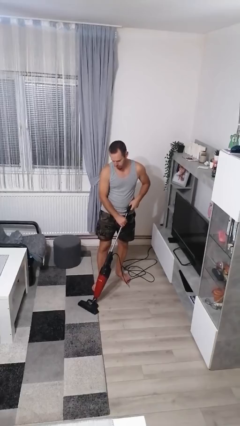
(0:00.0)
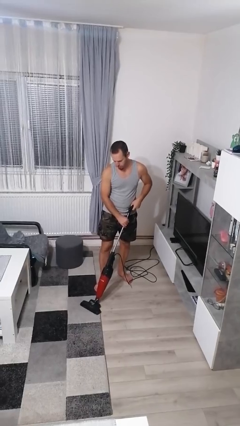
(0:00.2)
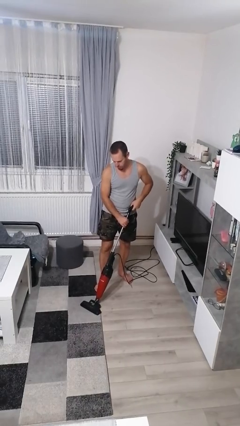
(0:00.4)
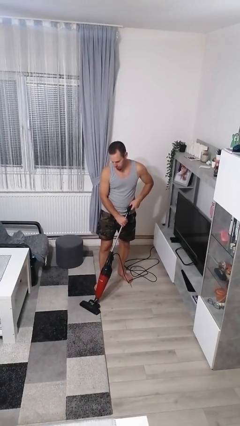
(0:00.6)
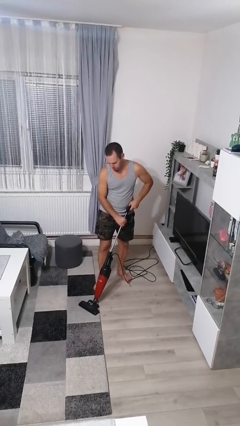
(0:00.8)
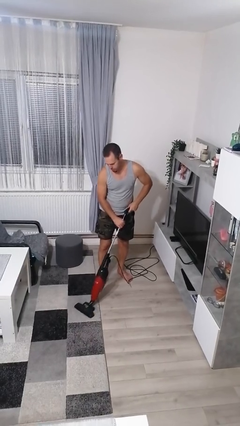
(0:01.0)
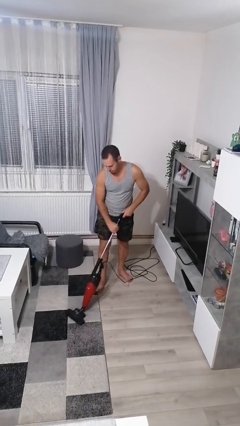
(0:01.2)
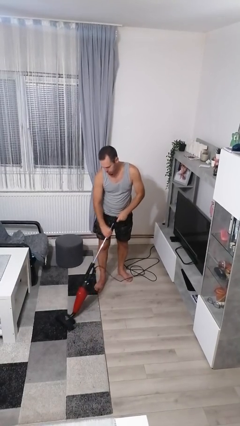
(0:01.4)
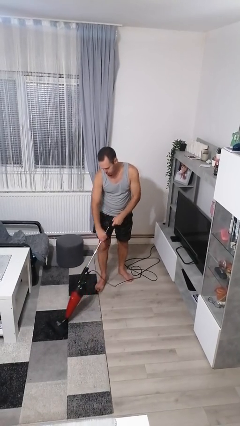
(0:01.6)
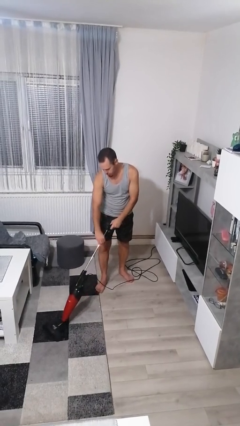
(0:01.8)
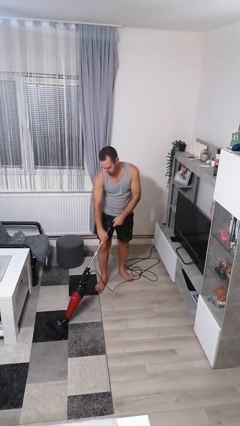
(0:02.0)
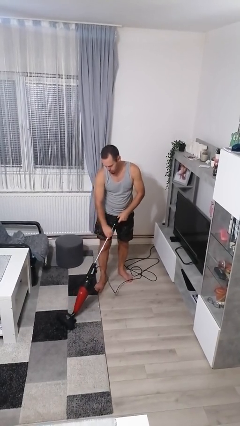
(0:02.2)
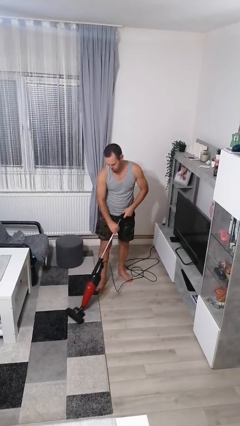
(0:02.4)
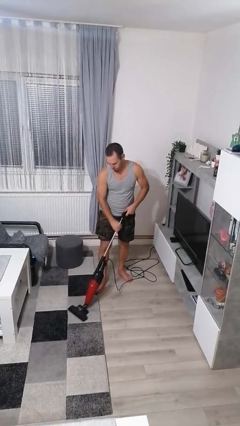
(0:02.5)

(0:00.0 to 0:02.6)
person vacuums carpet

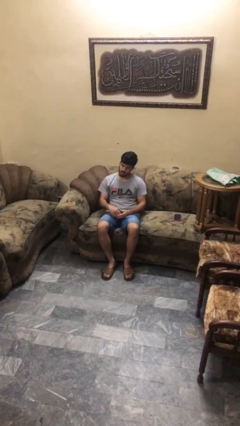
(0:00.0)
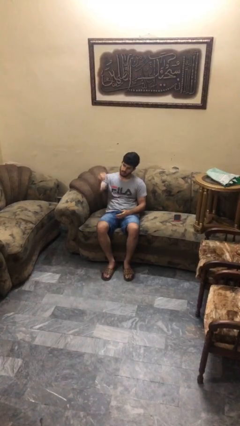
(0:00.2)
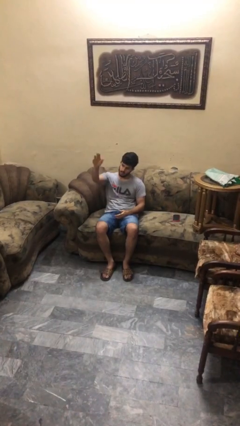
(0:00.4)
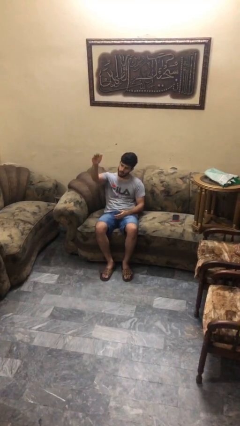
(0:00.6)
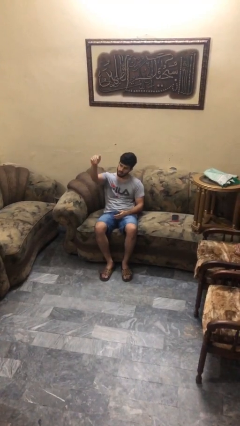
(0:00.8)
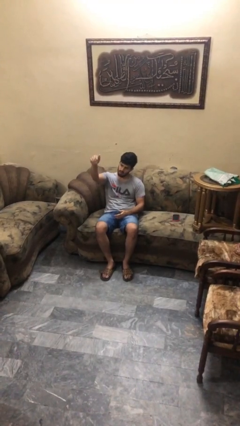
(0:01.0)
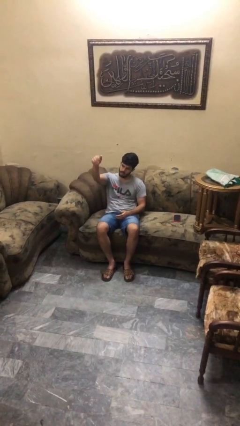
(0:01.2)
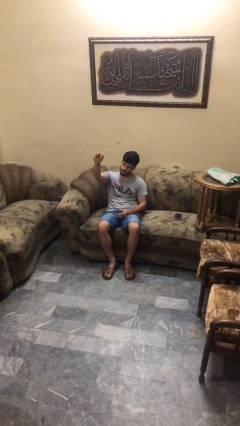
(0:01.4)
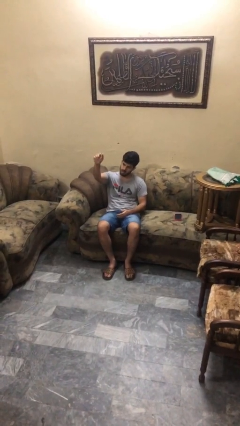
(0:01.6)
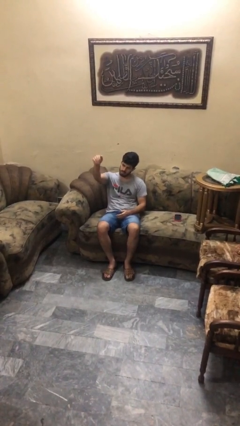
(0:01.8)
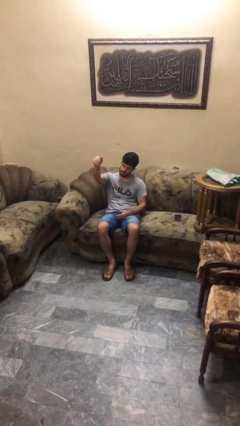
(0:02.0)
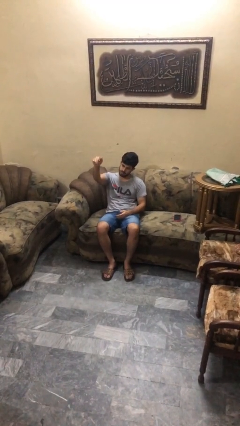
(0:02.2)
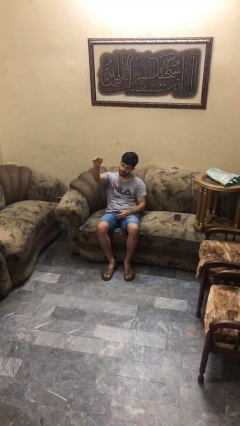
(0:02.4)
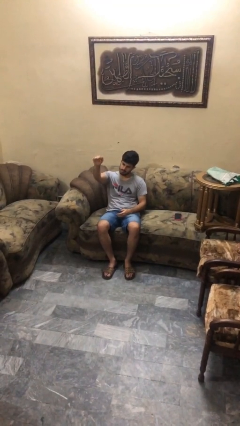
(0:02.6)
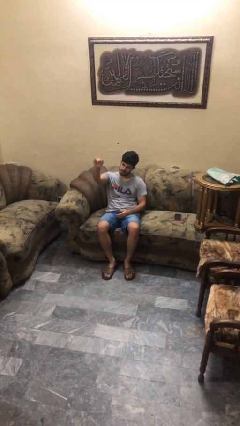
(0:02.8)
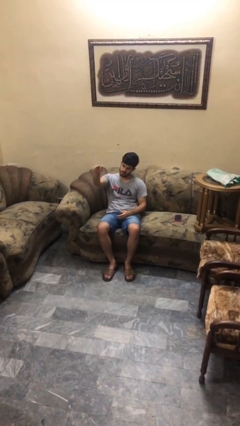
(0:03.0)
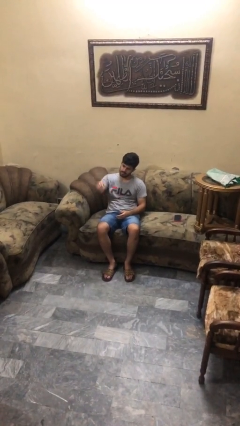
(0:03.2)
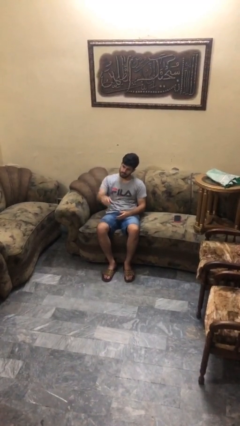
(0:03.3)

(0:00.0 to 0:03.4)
person gestures come here

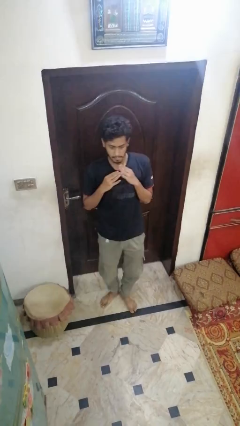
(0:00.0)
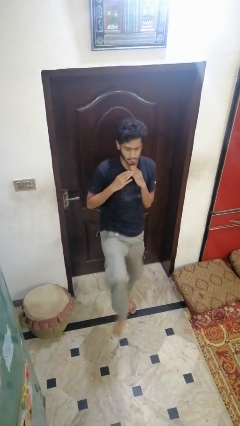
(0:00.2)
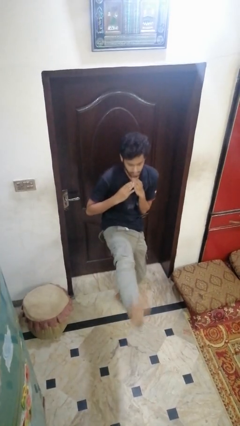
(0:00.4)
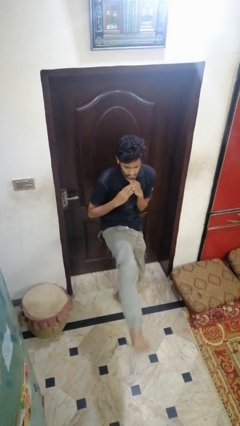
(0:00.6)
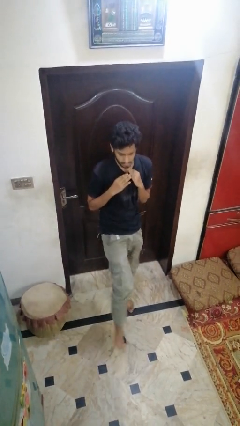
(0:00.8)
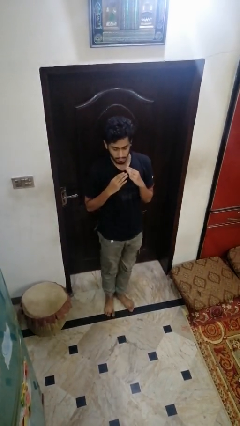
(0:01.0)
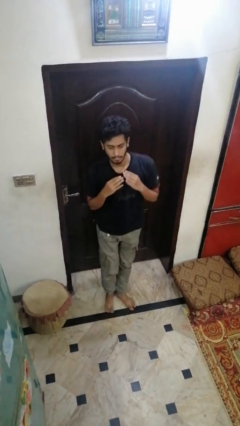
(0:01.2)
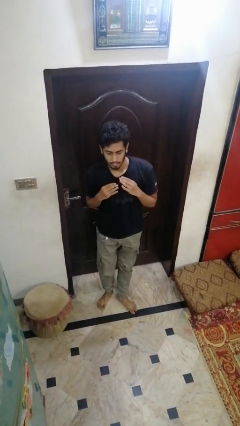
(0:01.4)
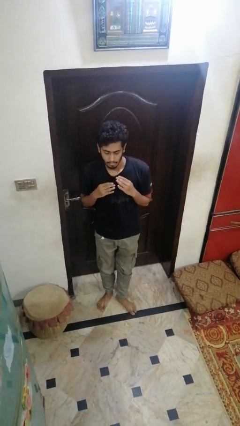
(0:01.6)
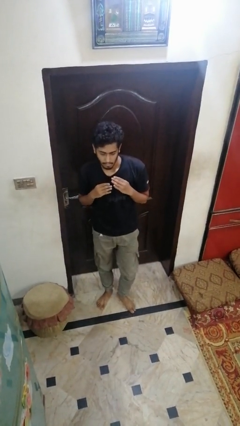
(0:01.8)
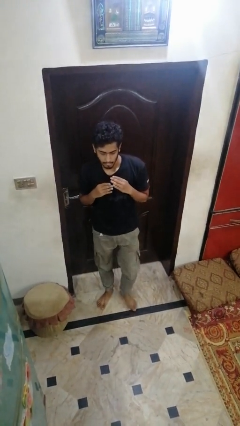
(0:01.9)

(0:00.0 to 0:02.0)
person flosses

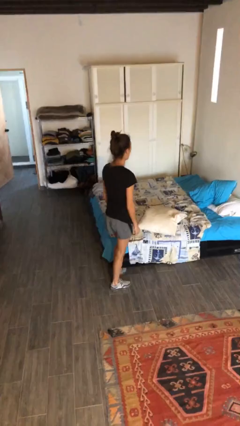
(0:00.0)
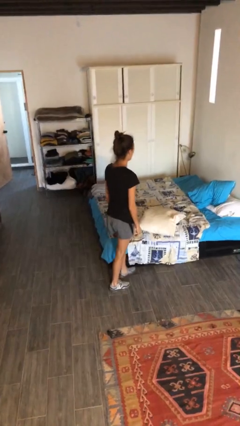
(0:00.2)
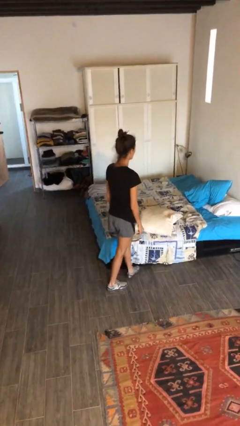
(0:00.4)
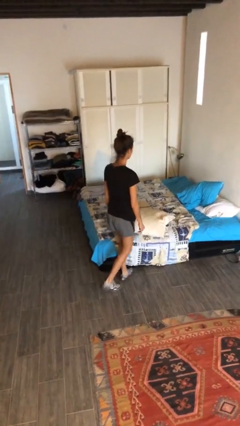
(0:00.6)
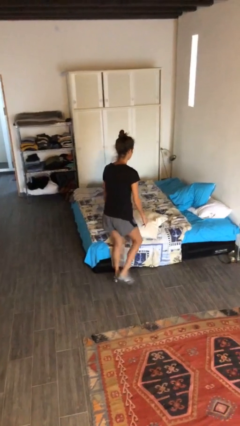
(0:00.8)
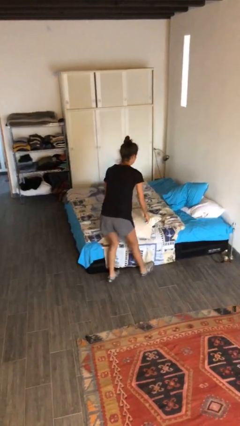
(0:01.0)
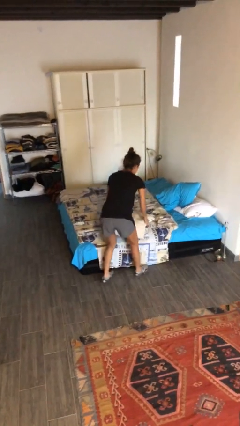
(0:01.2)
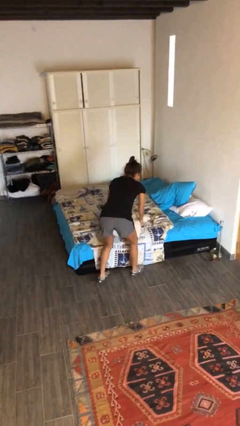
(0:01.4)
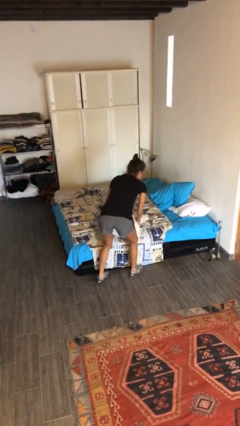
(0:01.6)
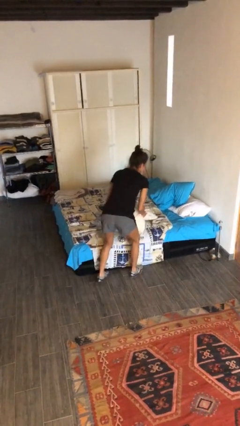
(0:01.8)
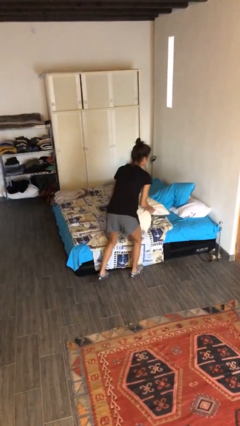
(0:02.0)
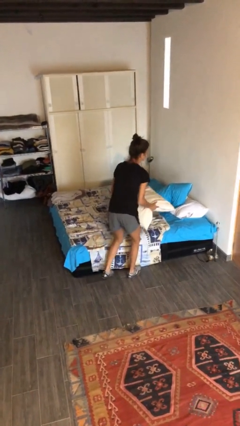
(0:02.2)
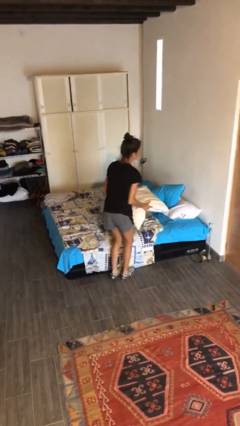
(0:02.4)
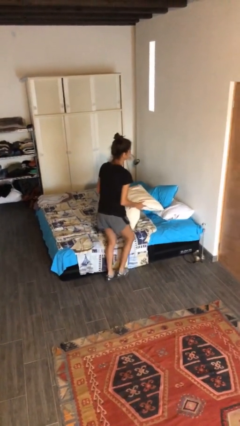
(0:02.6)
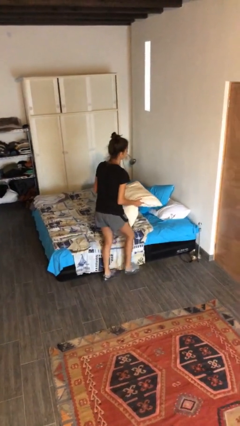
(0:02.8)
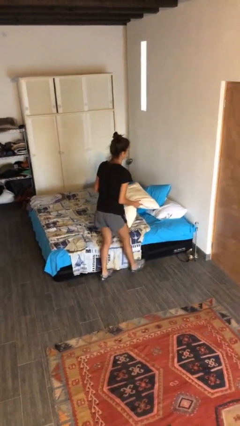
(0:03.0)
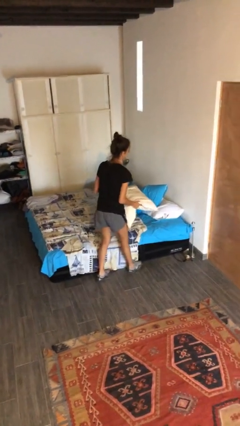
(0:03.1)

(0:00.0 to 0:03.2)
person picks up object from bed

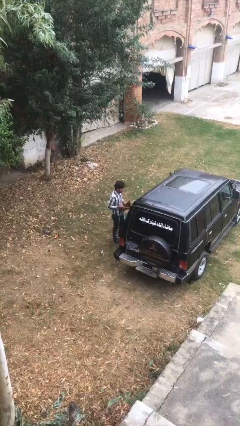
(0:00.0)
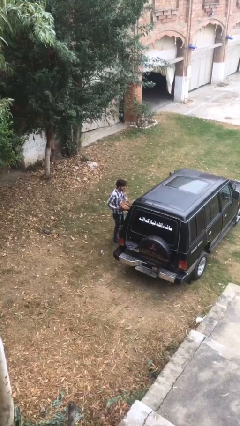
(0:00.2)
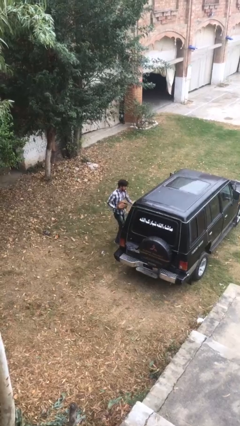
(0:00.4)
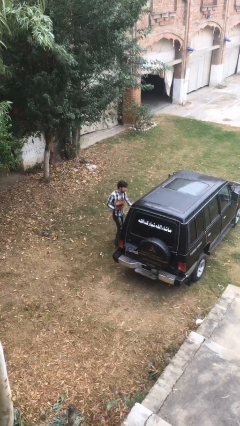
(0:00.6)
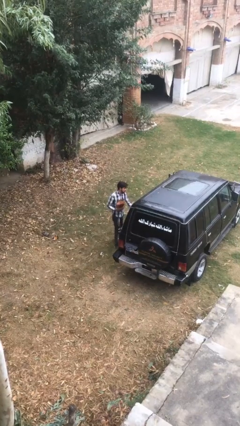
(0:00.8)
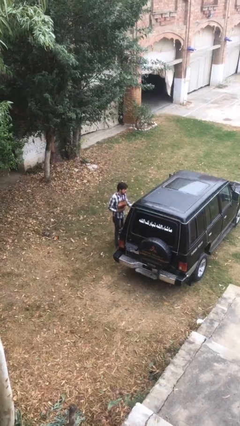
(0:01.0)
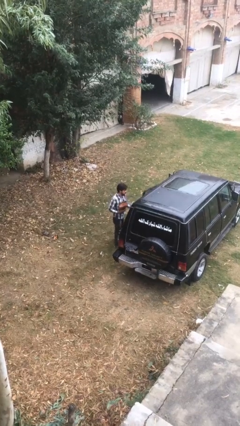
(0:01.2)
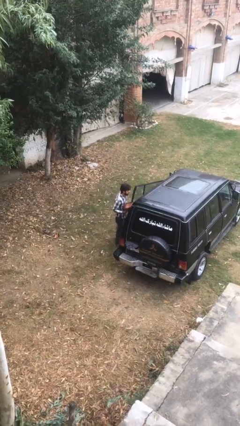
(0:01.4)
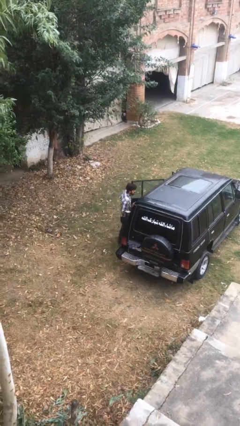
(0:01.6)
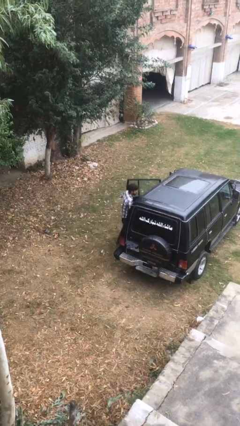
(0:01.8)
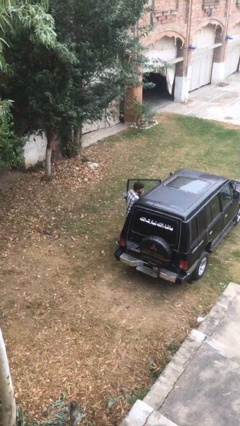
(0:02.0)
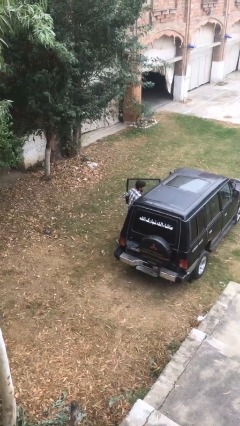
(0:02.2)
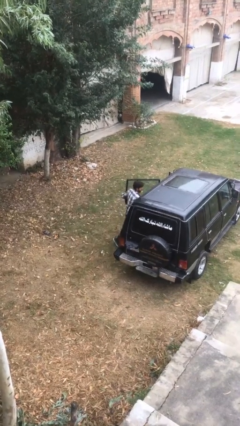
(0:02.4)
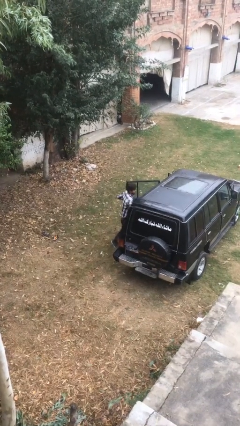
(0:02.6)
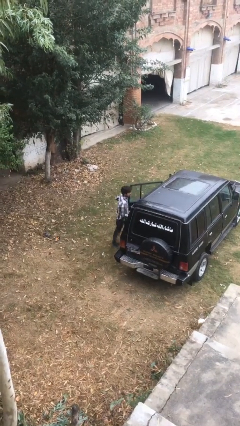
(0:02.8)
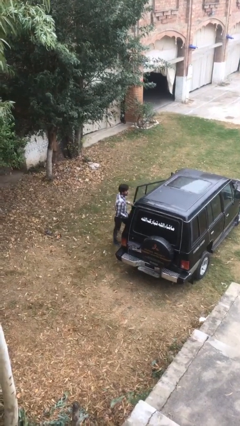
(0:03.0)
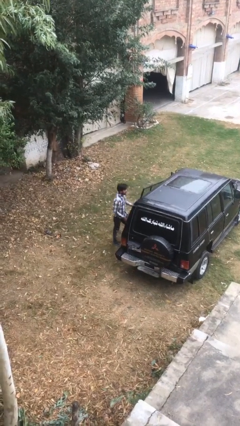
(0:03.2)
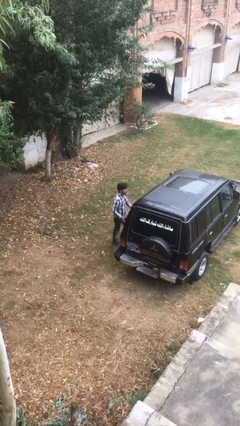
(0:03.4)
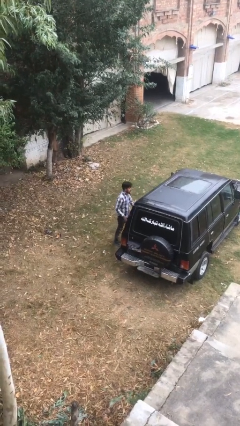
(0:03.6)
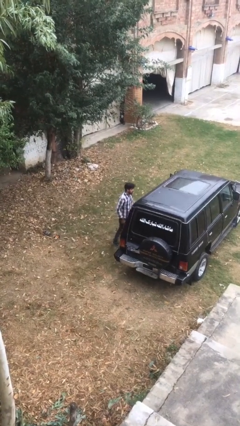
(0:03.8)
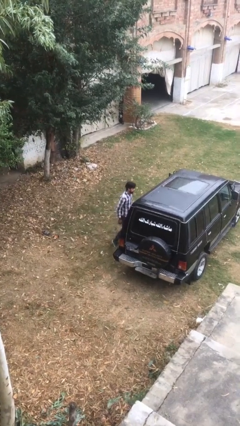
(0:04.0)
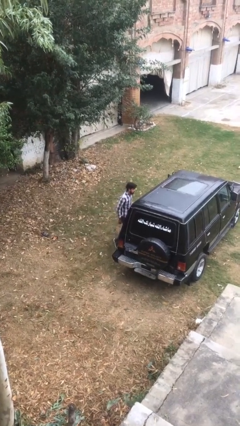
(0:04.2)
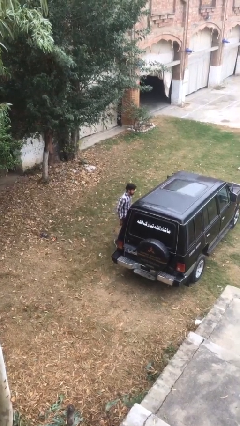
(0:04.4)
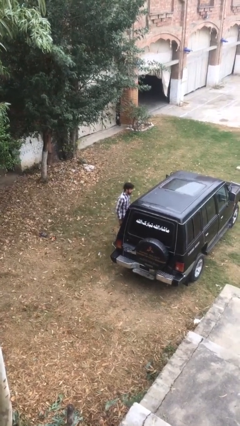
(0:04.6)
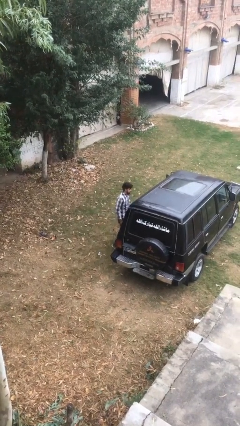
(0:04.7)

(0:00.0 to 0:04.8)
person loads car

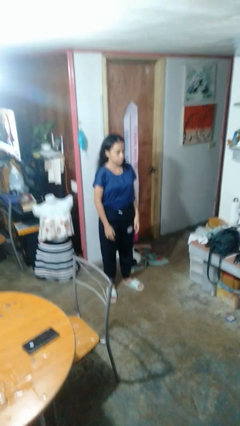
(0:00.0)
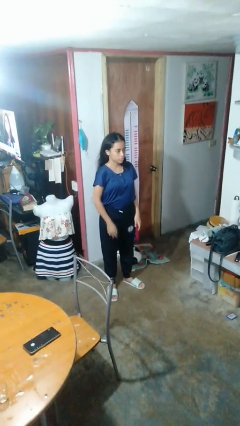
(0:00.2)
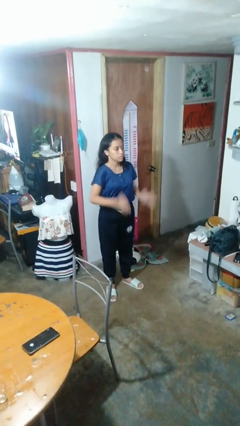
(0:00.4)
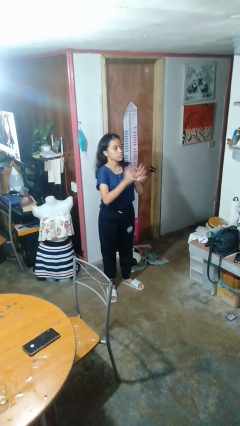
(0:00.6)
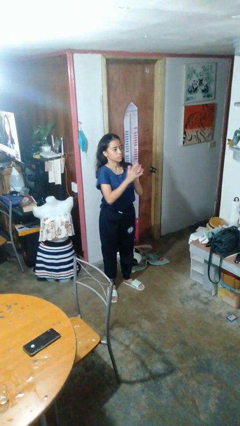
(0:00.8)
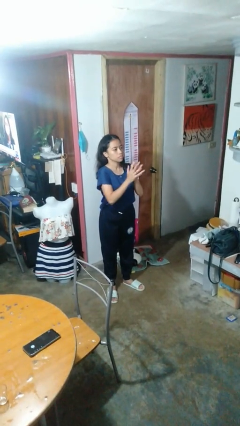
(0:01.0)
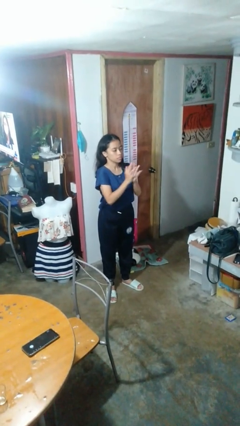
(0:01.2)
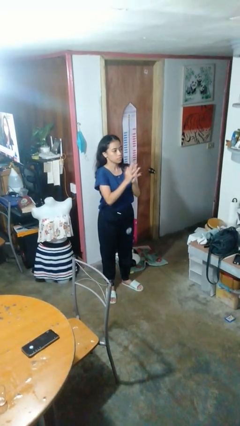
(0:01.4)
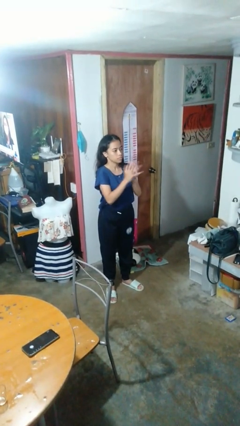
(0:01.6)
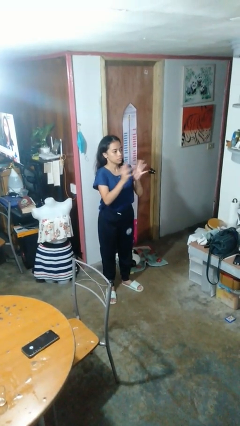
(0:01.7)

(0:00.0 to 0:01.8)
person claps hands
